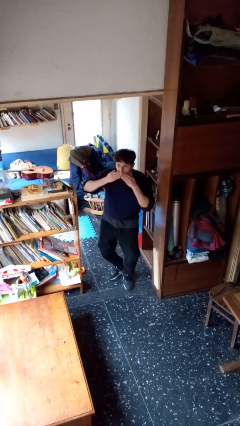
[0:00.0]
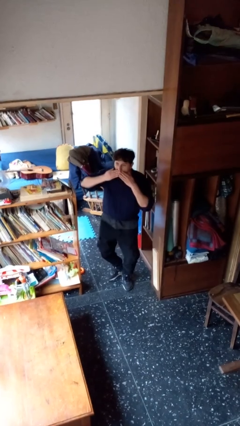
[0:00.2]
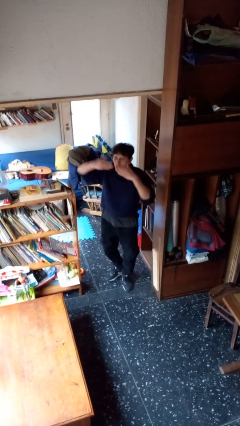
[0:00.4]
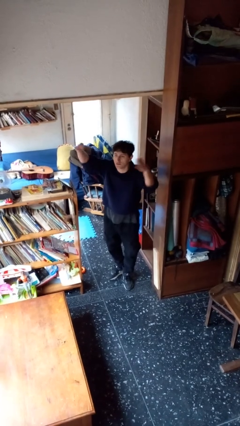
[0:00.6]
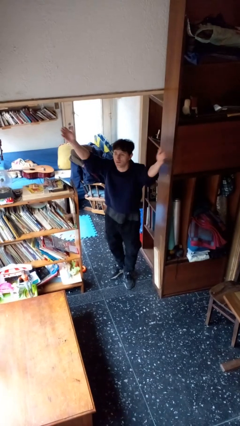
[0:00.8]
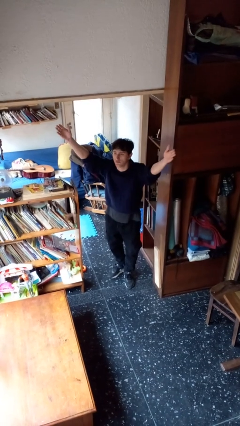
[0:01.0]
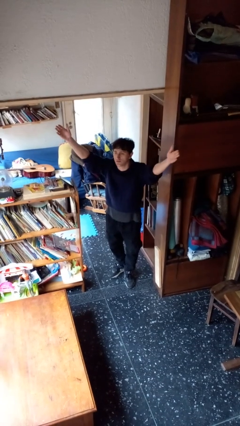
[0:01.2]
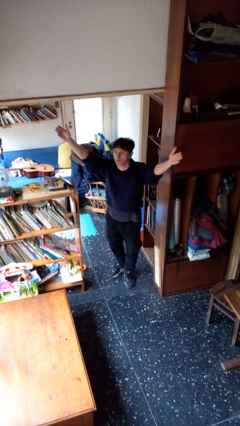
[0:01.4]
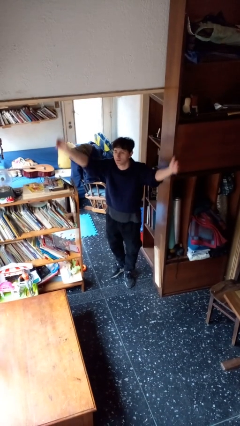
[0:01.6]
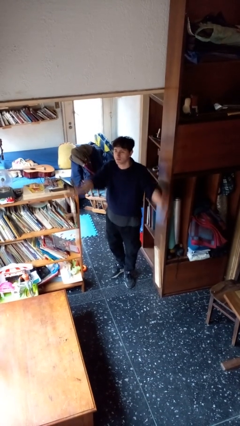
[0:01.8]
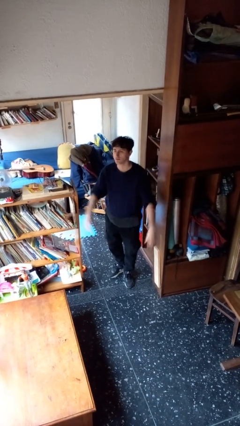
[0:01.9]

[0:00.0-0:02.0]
person gestures blow kiss

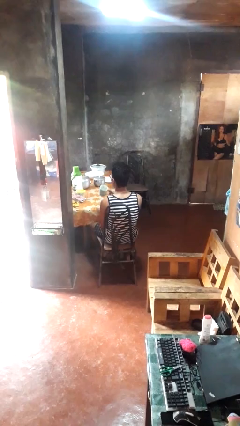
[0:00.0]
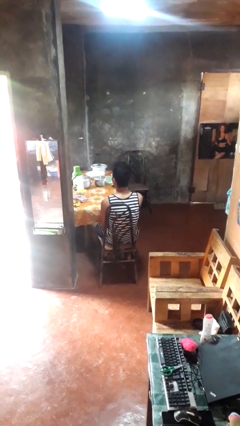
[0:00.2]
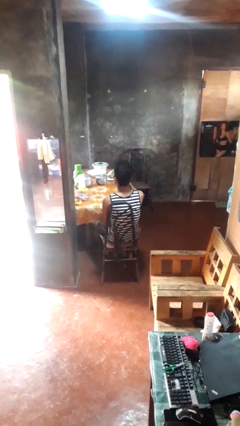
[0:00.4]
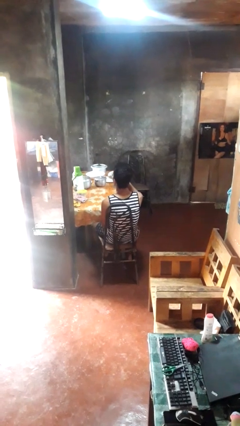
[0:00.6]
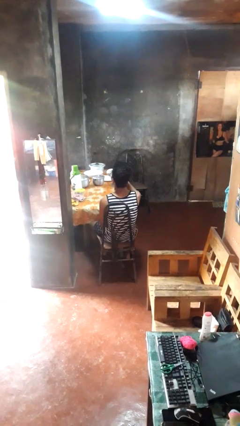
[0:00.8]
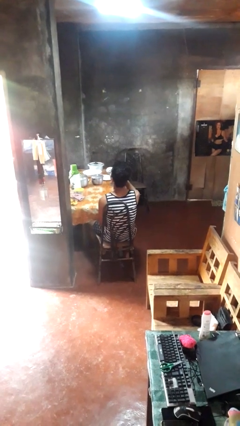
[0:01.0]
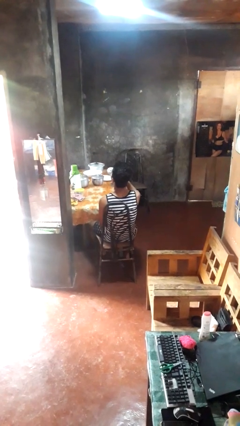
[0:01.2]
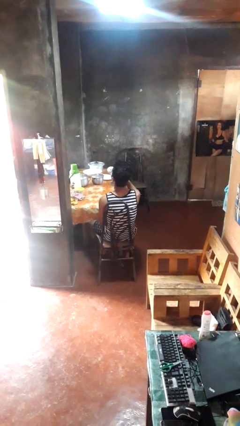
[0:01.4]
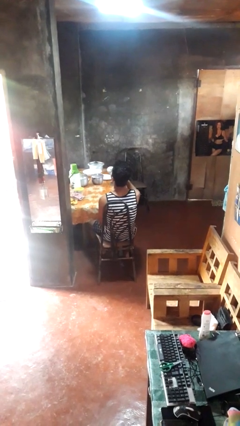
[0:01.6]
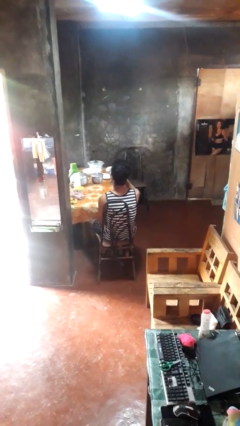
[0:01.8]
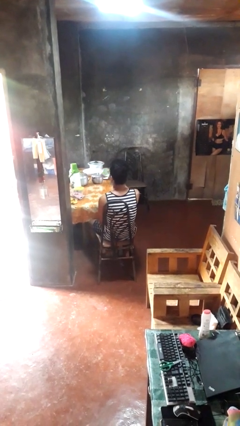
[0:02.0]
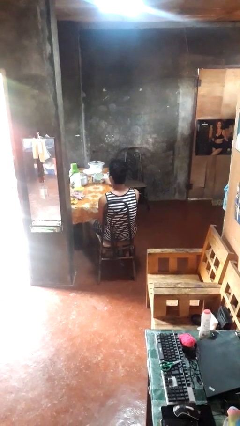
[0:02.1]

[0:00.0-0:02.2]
person drinks from mug

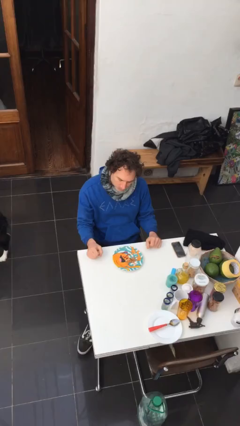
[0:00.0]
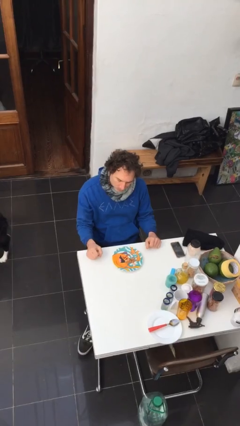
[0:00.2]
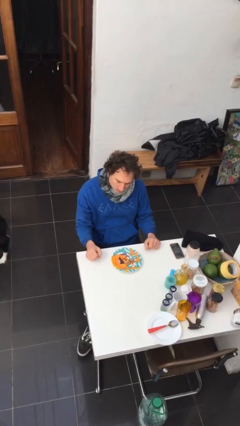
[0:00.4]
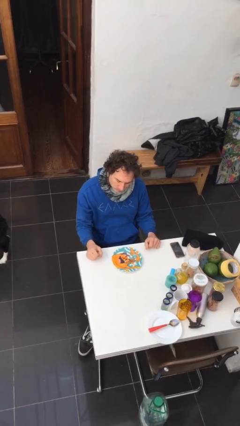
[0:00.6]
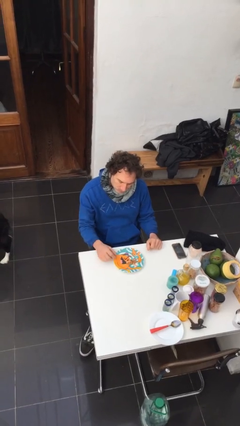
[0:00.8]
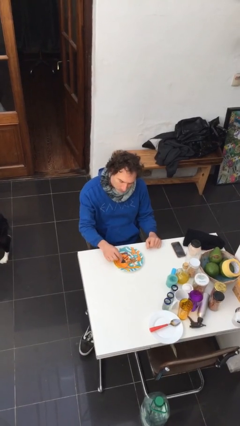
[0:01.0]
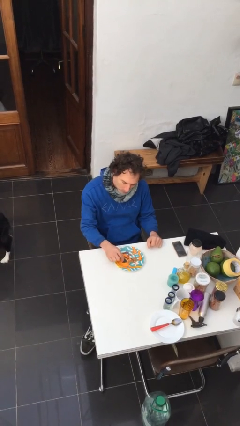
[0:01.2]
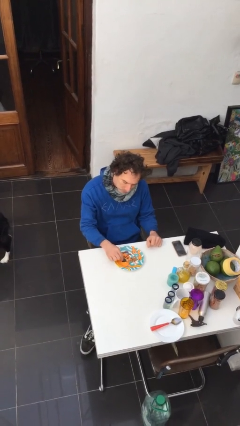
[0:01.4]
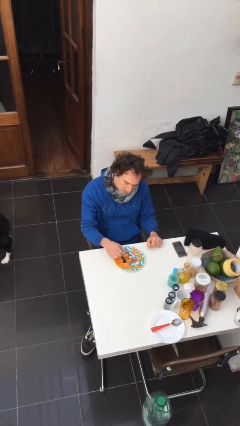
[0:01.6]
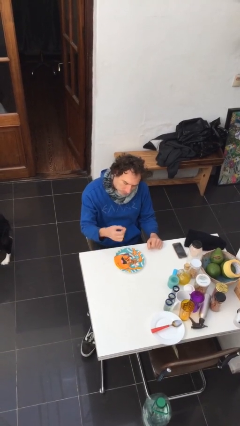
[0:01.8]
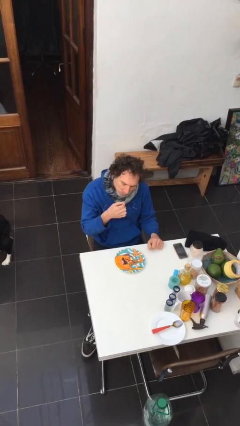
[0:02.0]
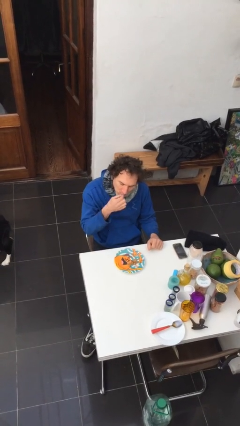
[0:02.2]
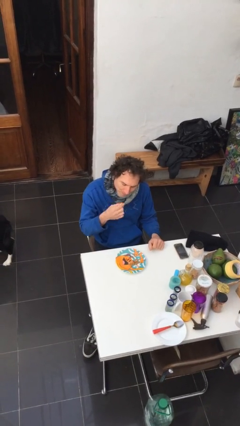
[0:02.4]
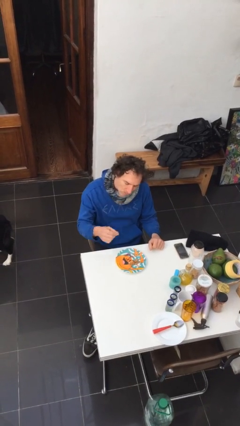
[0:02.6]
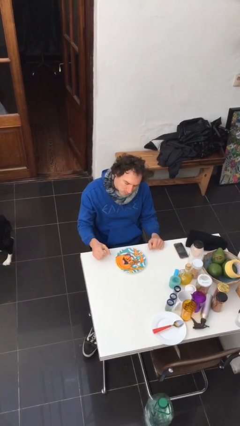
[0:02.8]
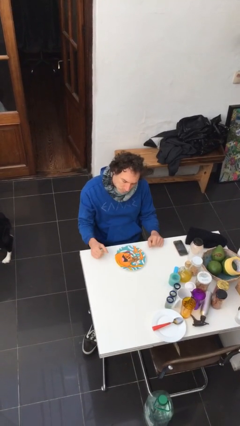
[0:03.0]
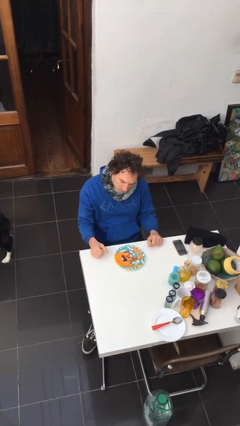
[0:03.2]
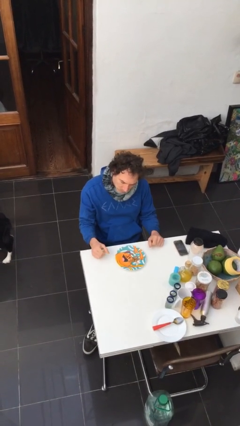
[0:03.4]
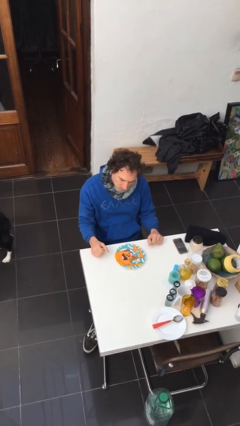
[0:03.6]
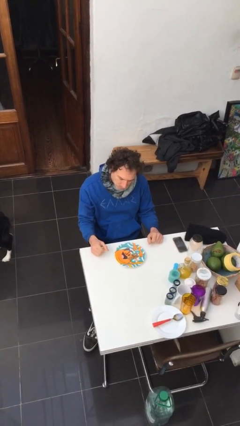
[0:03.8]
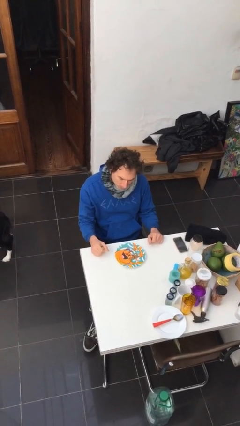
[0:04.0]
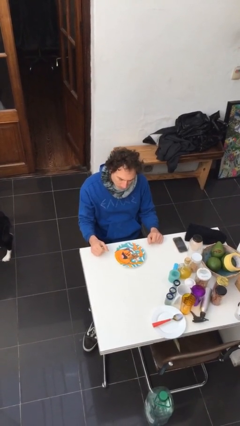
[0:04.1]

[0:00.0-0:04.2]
person eats with hands

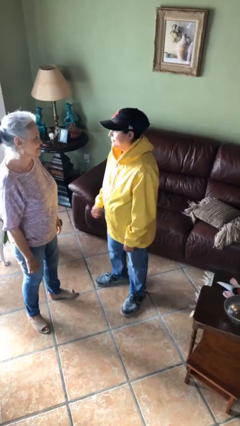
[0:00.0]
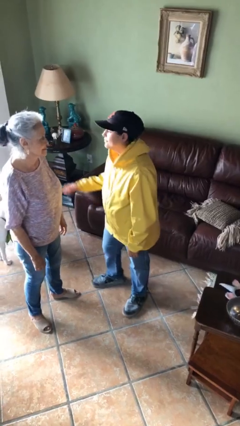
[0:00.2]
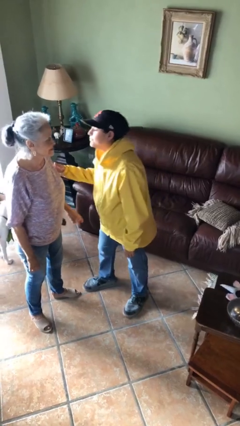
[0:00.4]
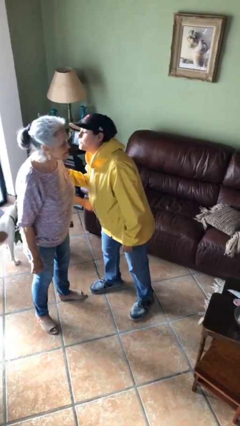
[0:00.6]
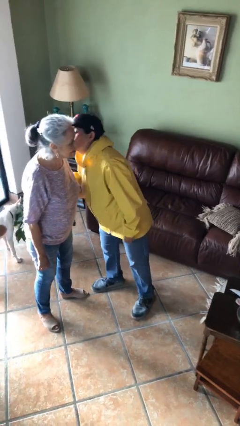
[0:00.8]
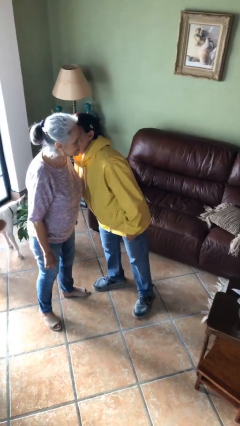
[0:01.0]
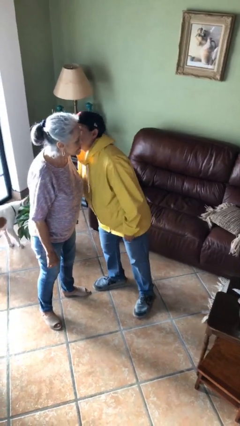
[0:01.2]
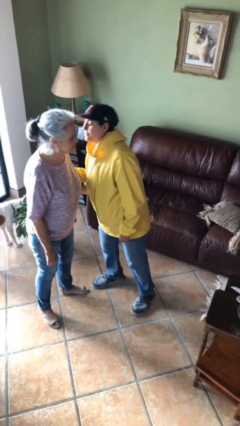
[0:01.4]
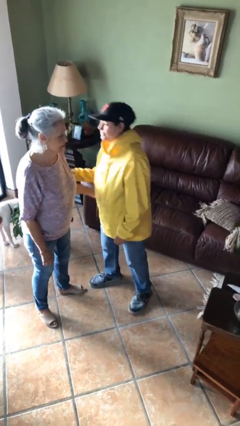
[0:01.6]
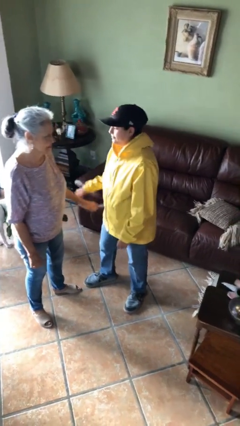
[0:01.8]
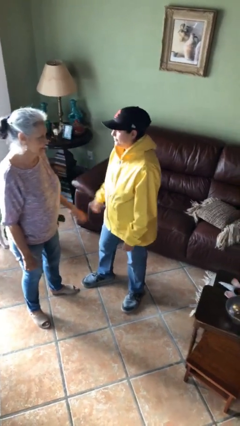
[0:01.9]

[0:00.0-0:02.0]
person kisses cheek of person

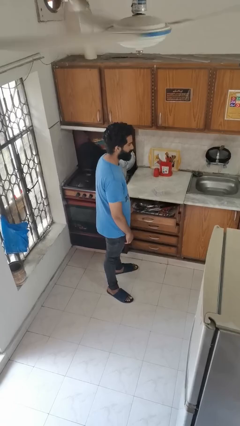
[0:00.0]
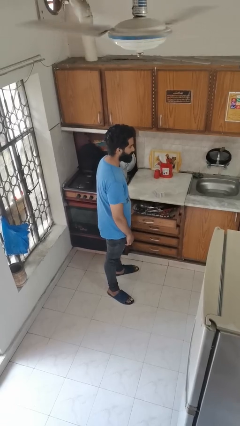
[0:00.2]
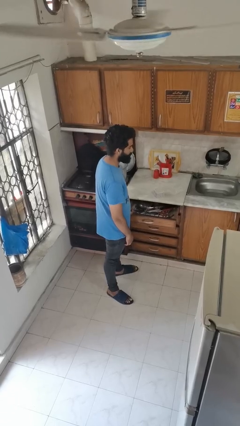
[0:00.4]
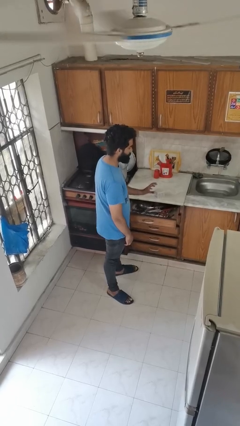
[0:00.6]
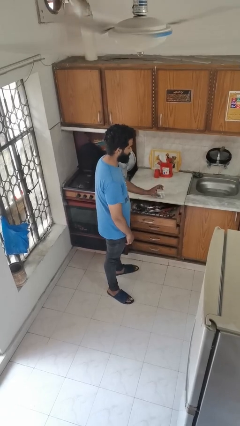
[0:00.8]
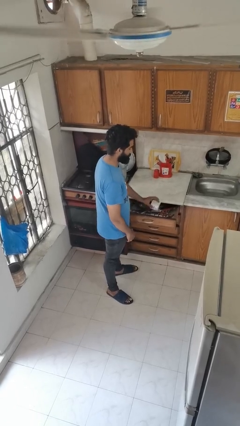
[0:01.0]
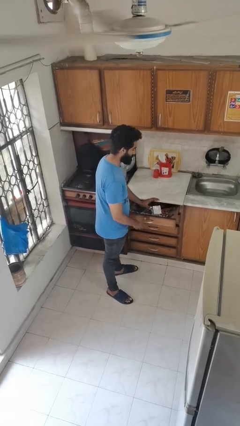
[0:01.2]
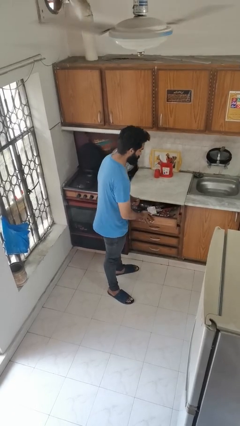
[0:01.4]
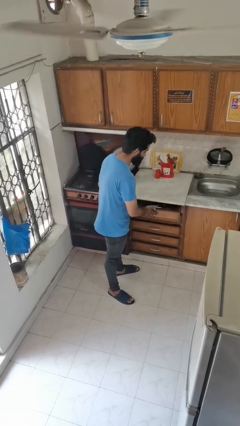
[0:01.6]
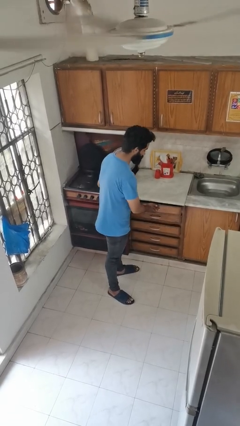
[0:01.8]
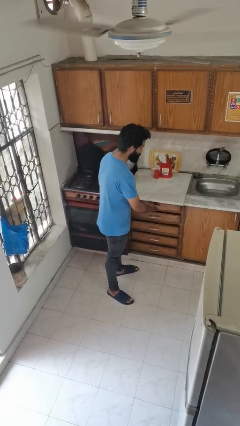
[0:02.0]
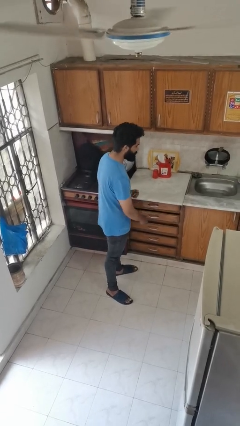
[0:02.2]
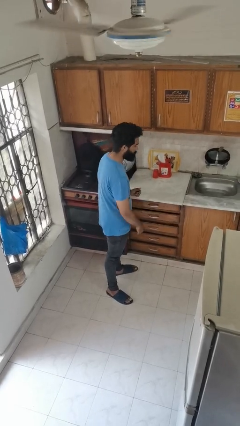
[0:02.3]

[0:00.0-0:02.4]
person puts object into kitchen drawer

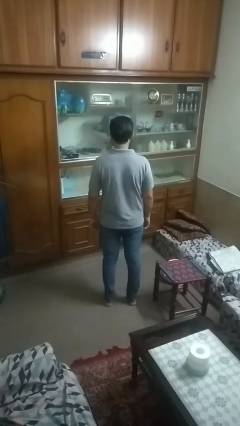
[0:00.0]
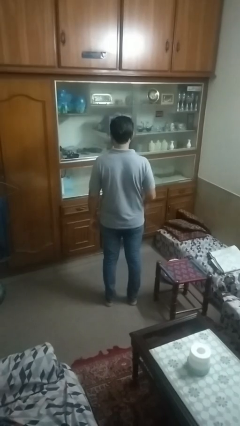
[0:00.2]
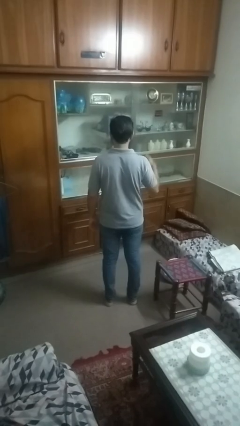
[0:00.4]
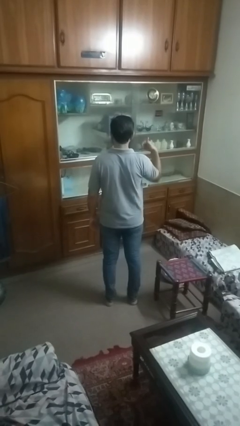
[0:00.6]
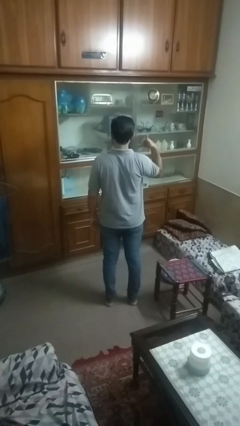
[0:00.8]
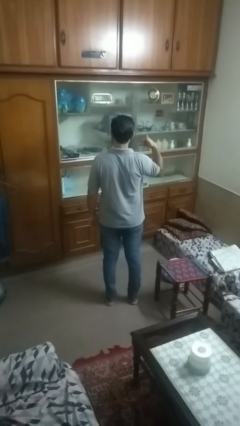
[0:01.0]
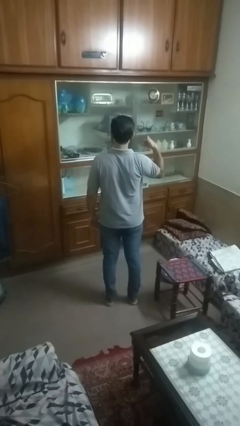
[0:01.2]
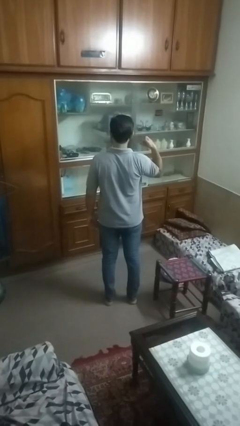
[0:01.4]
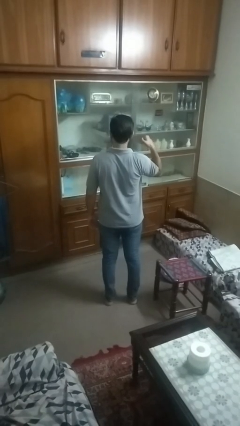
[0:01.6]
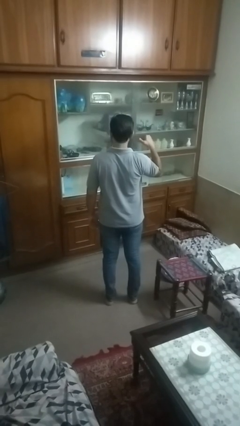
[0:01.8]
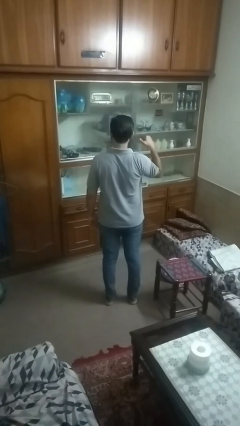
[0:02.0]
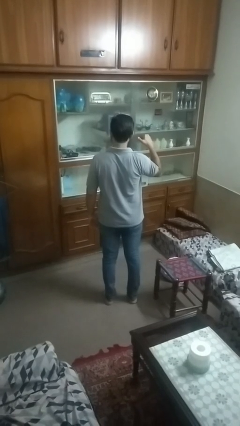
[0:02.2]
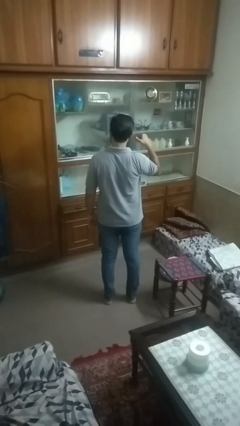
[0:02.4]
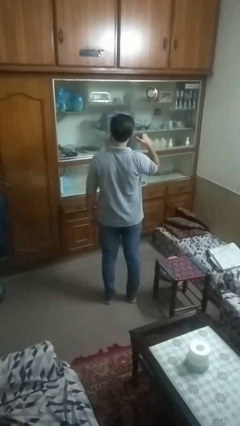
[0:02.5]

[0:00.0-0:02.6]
person gestures call me

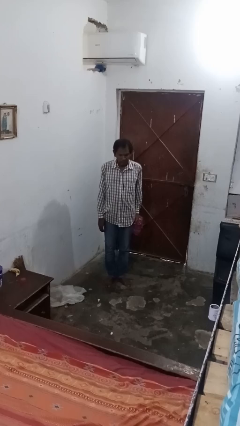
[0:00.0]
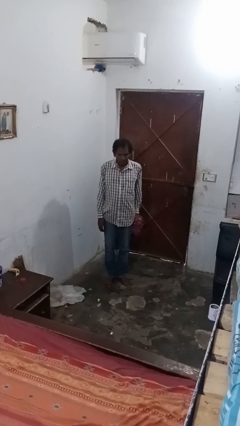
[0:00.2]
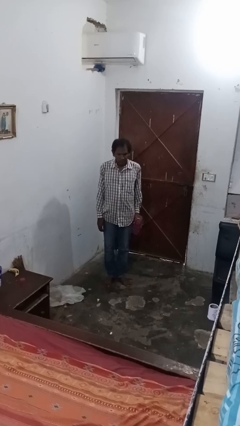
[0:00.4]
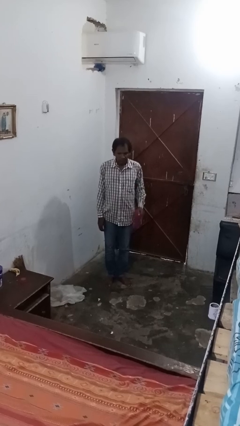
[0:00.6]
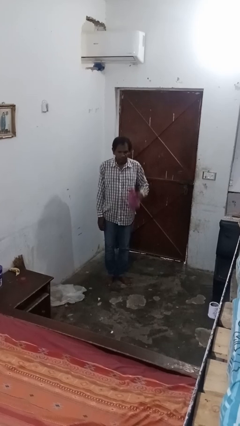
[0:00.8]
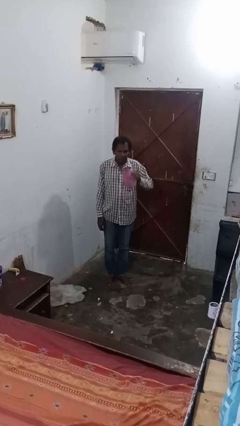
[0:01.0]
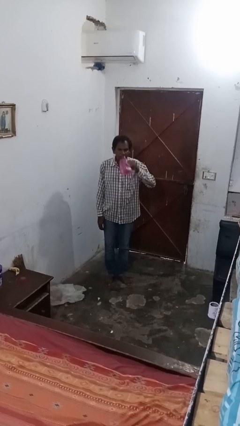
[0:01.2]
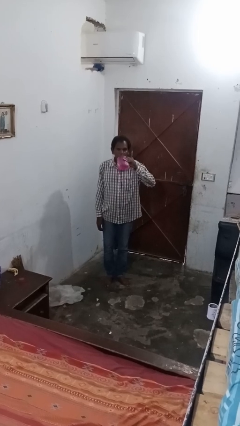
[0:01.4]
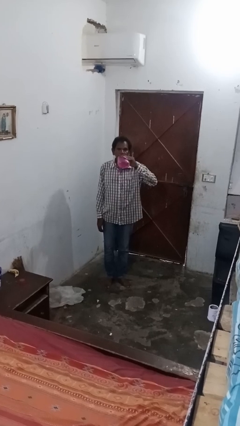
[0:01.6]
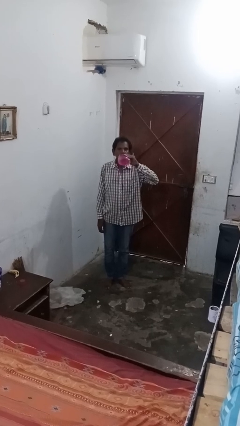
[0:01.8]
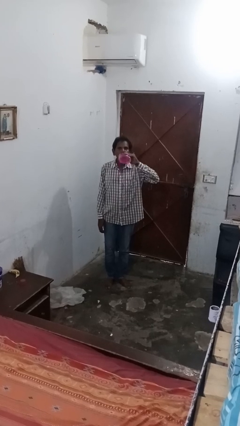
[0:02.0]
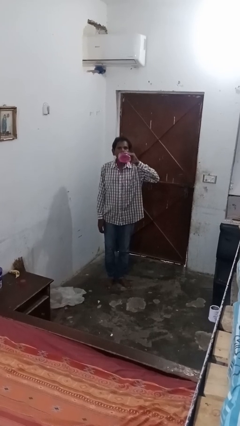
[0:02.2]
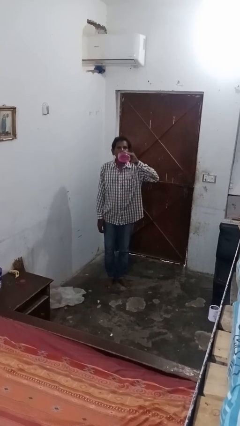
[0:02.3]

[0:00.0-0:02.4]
person drinks from bottle
